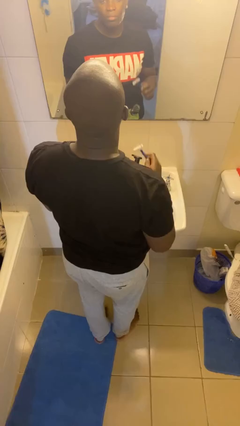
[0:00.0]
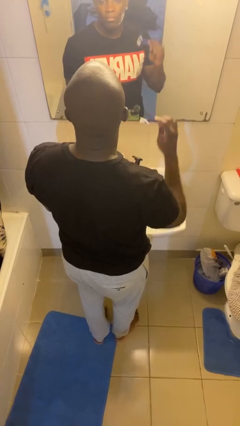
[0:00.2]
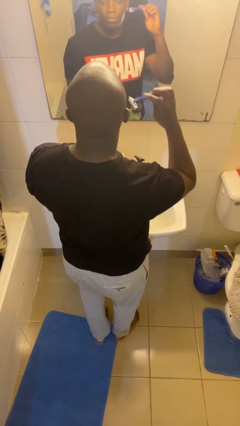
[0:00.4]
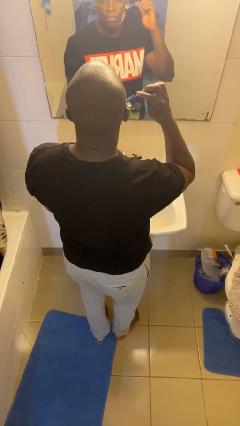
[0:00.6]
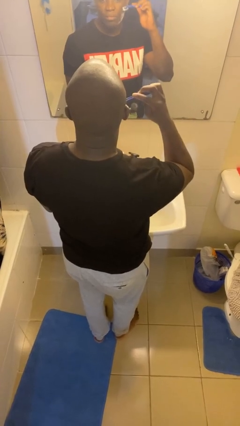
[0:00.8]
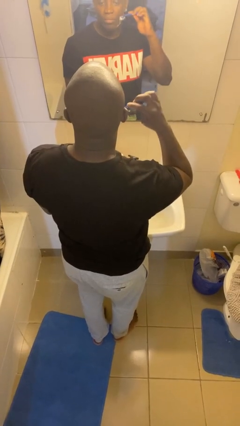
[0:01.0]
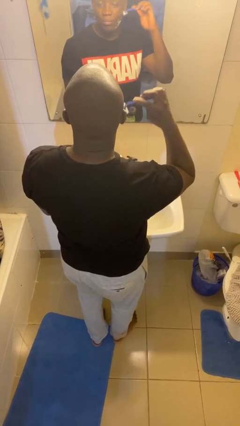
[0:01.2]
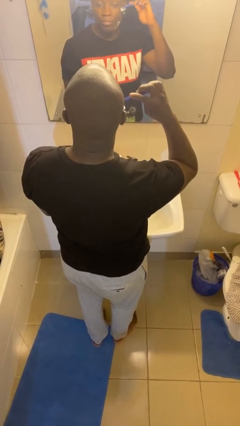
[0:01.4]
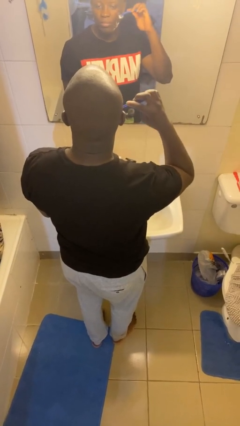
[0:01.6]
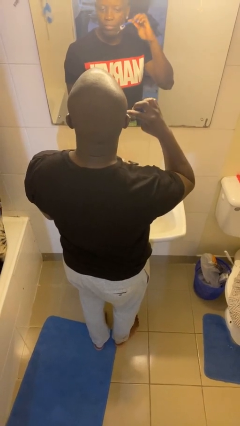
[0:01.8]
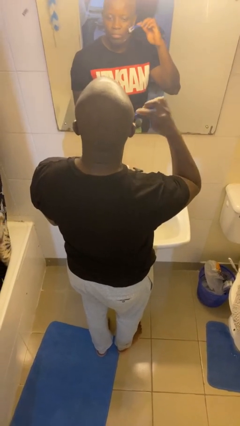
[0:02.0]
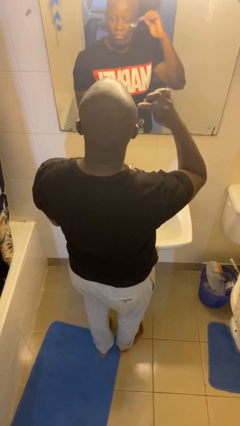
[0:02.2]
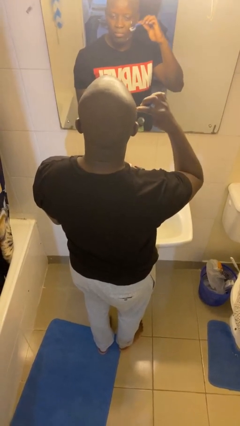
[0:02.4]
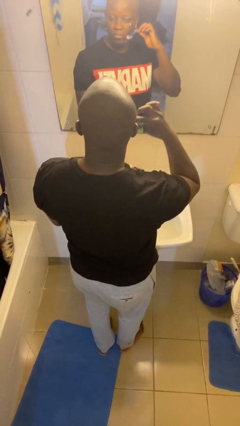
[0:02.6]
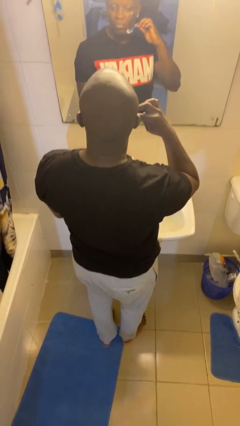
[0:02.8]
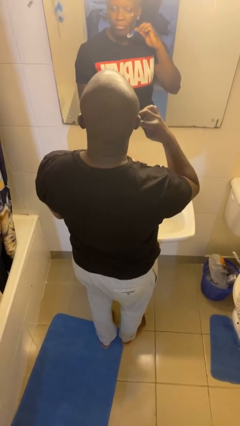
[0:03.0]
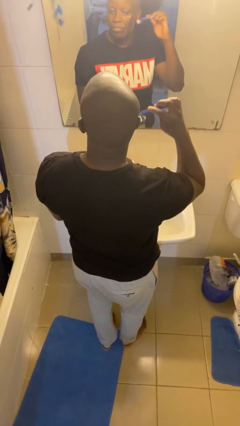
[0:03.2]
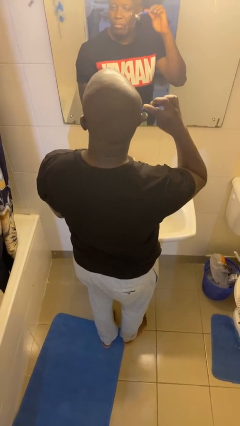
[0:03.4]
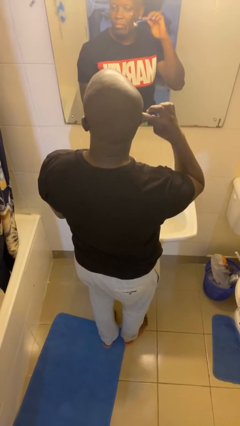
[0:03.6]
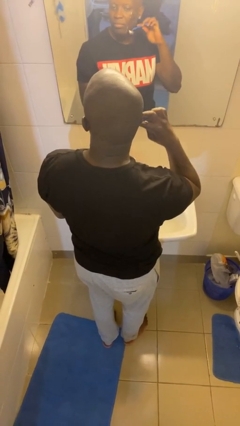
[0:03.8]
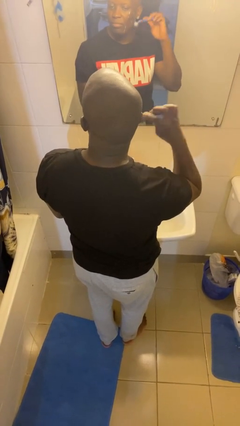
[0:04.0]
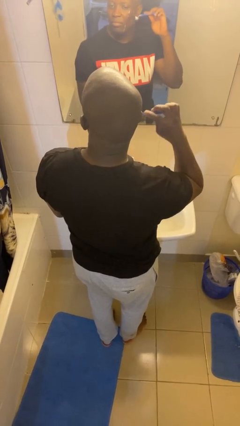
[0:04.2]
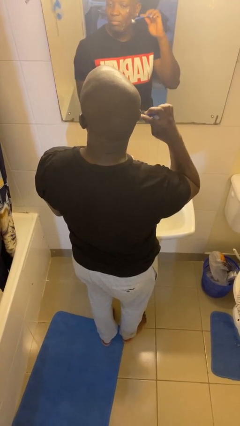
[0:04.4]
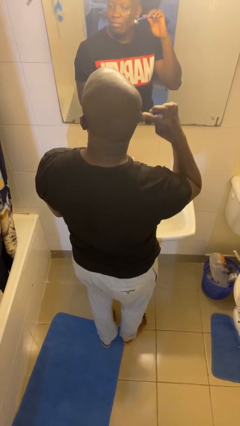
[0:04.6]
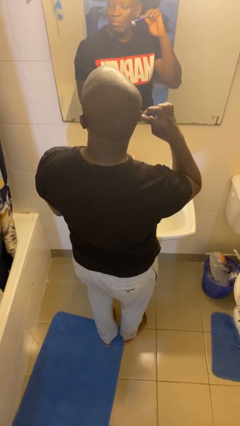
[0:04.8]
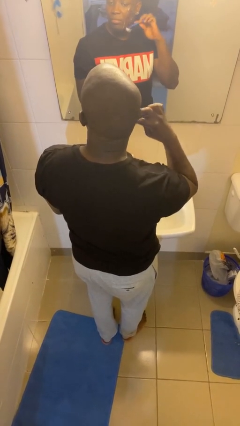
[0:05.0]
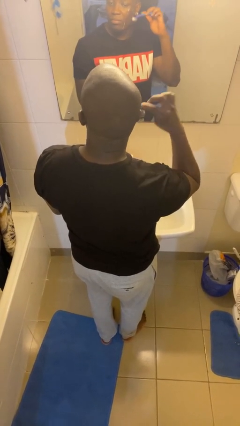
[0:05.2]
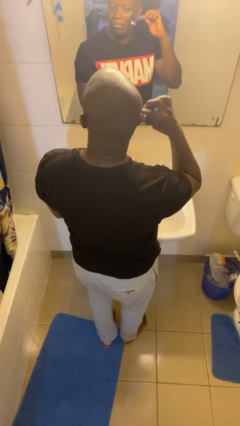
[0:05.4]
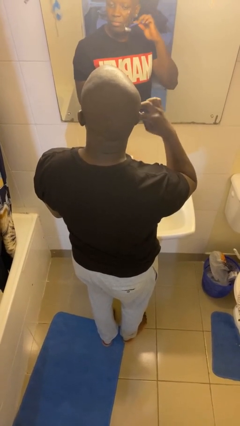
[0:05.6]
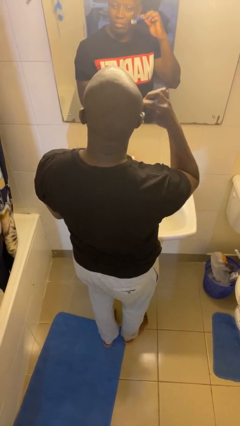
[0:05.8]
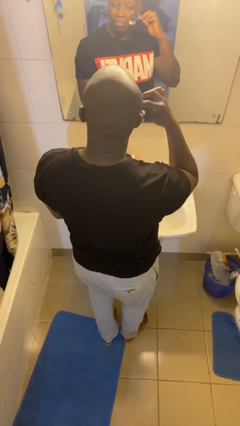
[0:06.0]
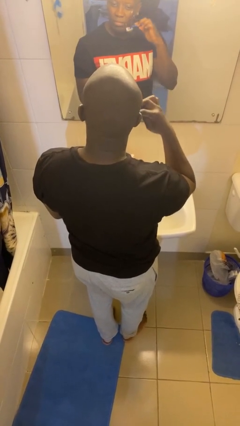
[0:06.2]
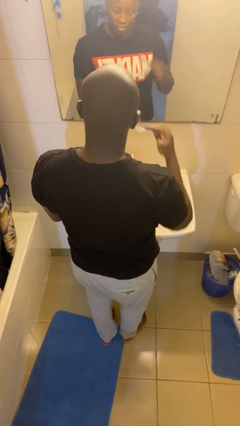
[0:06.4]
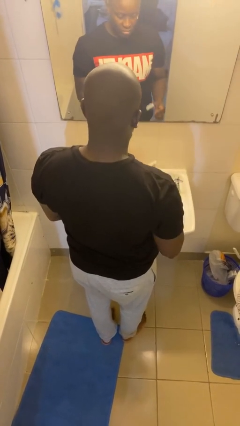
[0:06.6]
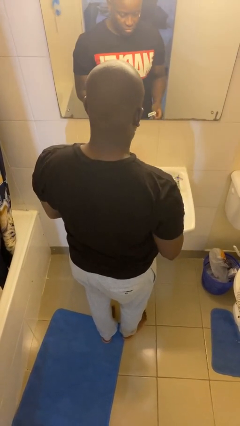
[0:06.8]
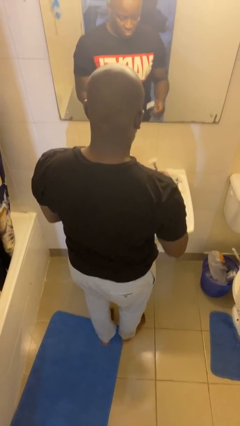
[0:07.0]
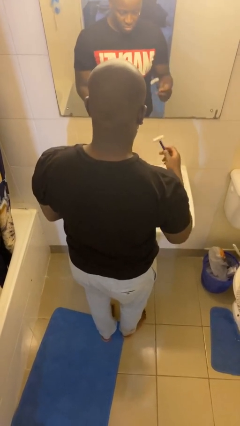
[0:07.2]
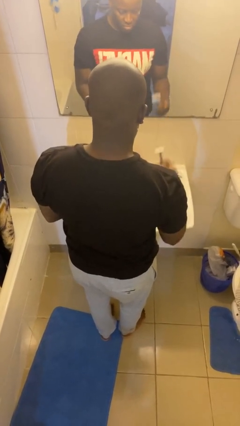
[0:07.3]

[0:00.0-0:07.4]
person shaves face

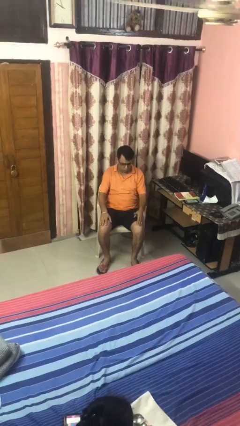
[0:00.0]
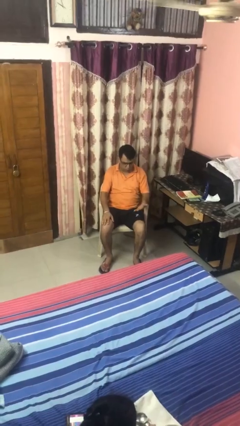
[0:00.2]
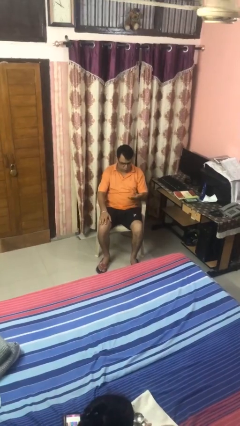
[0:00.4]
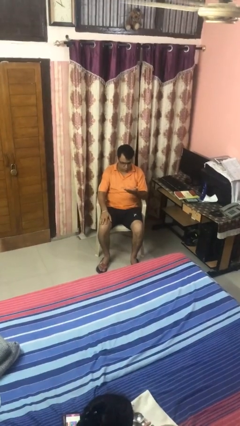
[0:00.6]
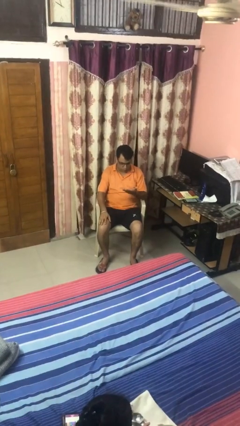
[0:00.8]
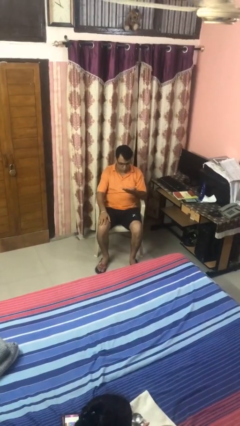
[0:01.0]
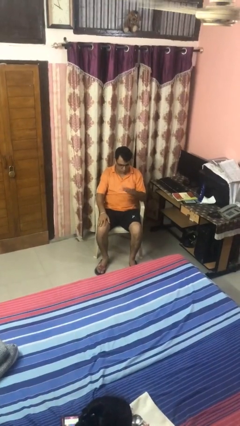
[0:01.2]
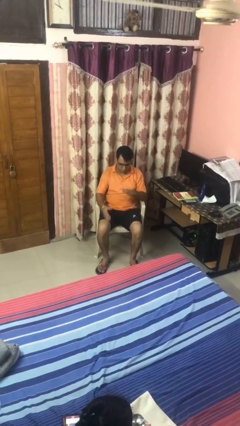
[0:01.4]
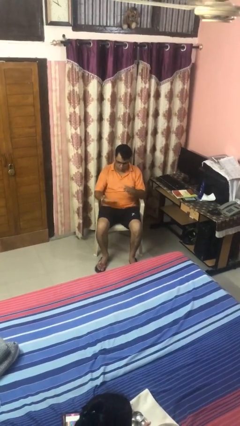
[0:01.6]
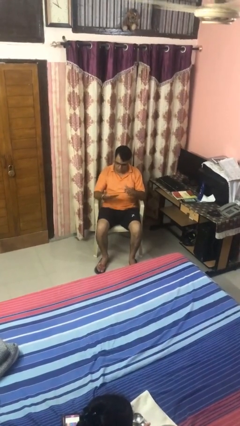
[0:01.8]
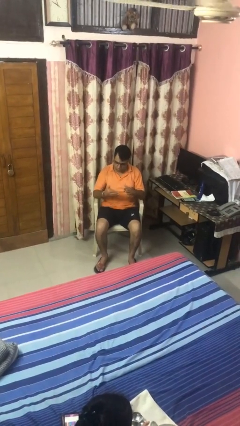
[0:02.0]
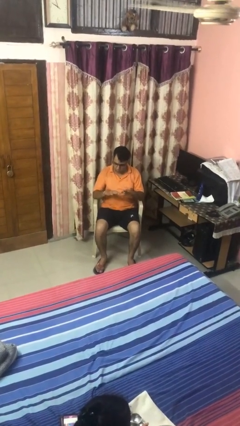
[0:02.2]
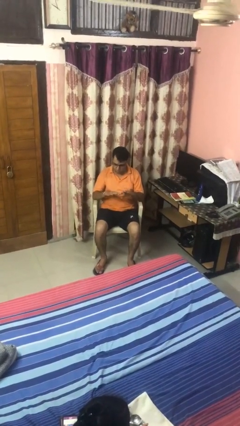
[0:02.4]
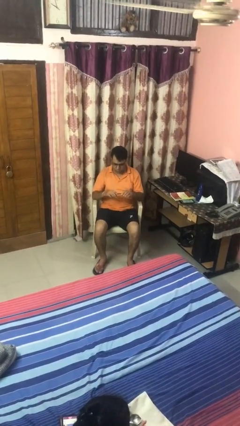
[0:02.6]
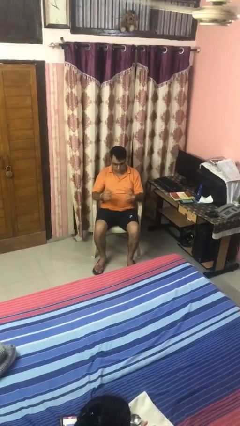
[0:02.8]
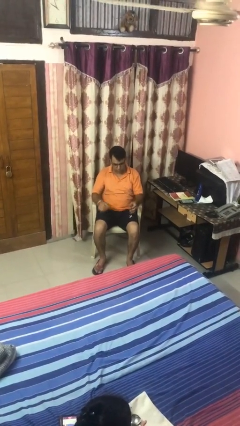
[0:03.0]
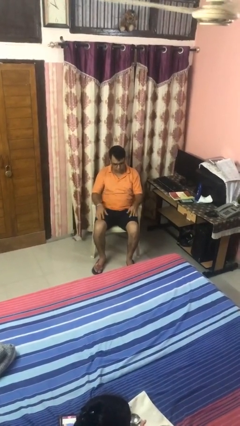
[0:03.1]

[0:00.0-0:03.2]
person looks at hands in lap

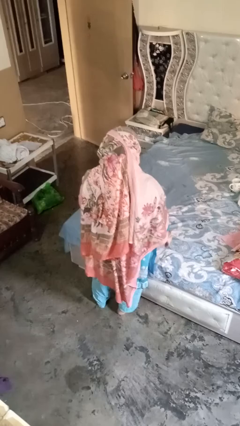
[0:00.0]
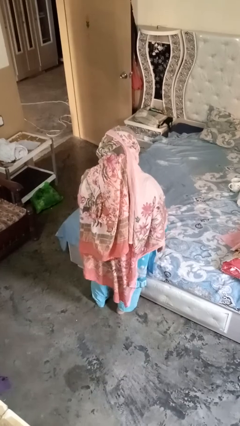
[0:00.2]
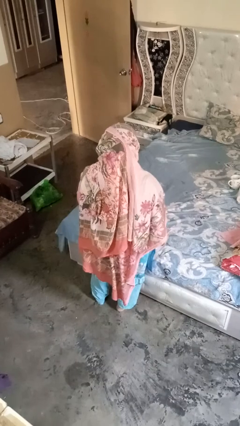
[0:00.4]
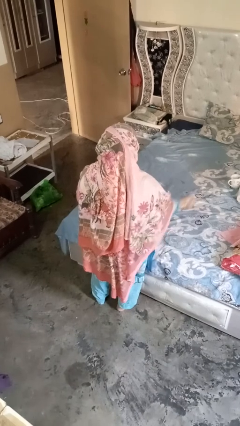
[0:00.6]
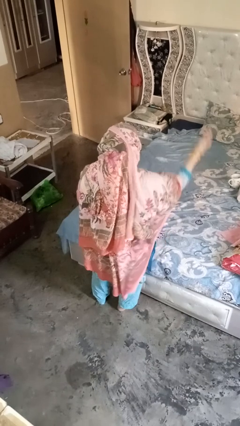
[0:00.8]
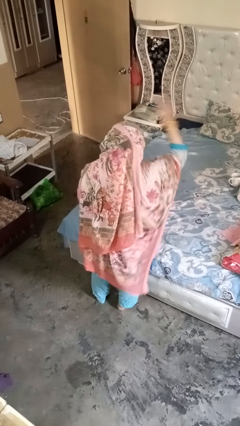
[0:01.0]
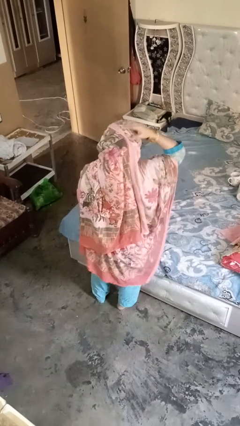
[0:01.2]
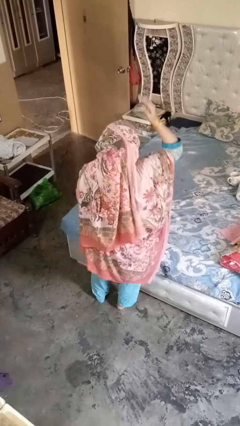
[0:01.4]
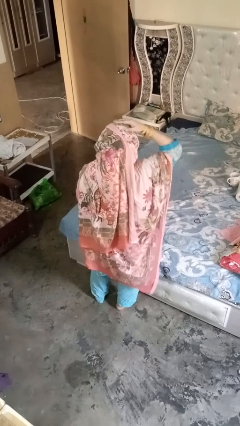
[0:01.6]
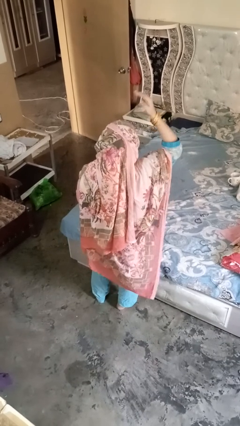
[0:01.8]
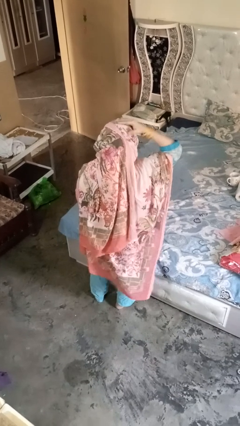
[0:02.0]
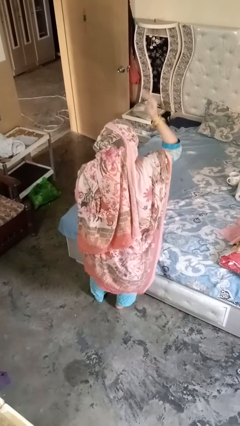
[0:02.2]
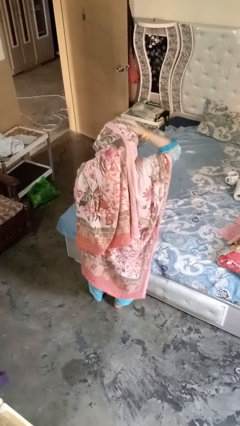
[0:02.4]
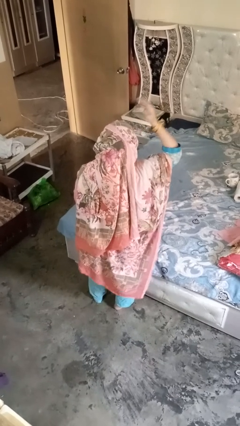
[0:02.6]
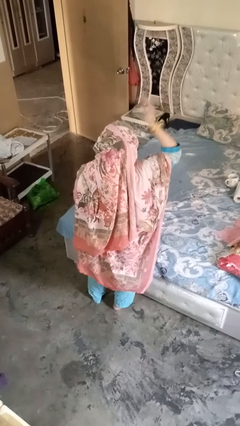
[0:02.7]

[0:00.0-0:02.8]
person pats head

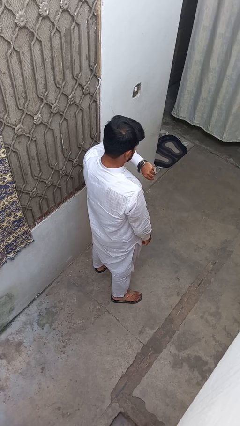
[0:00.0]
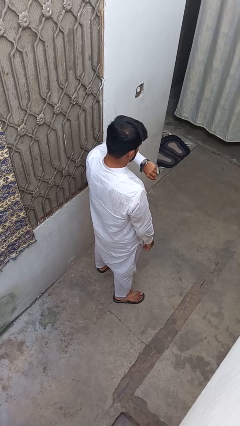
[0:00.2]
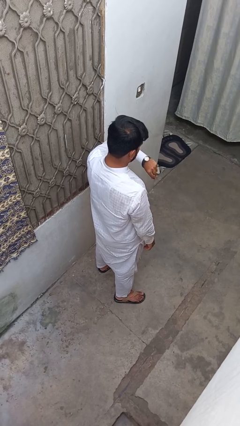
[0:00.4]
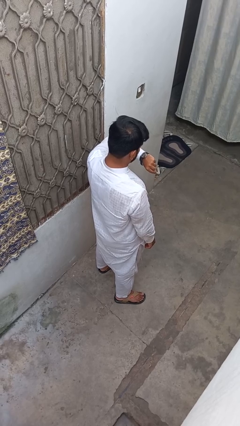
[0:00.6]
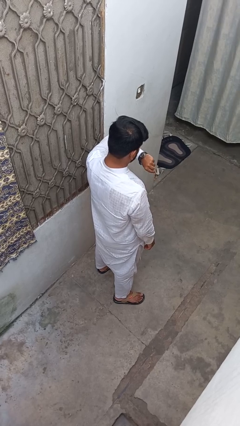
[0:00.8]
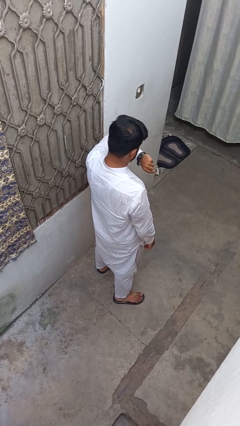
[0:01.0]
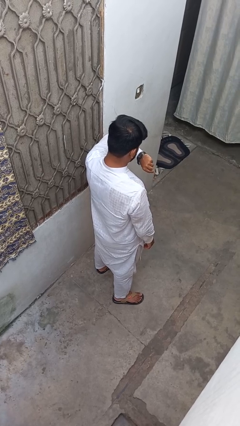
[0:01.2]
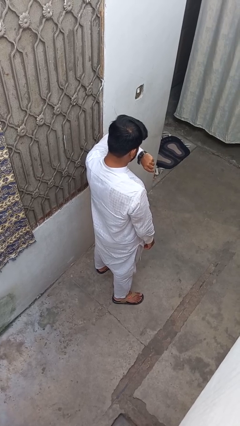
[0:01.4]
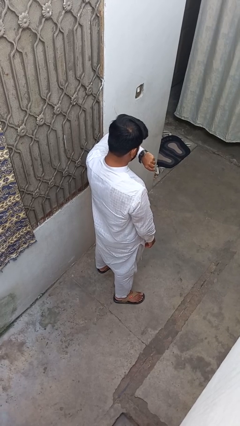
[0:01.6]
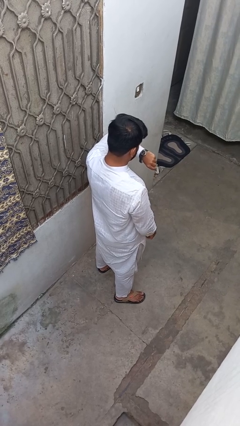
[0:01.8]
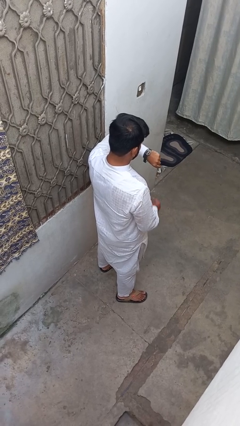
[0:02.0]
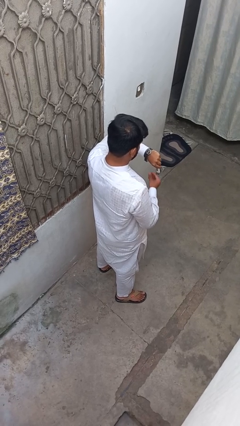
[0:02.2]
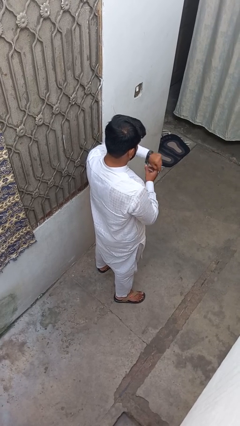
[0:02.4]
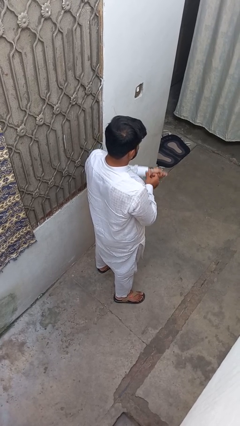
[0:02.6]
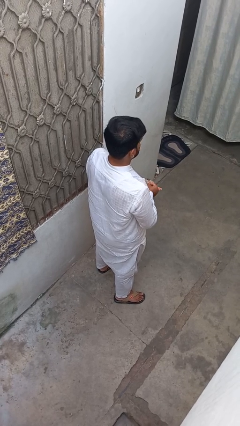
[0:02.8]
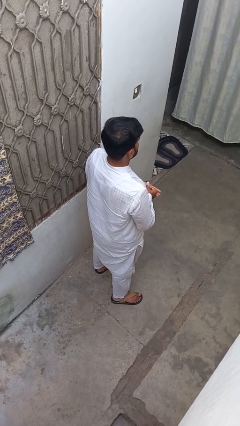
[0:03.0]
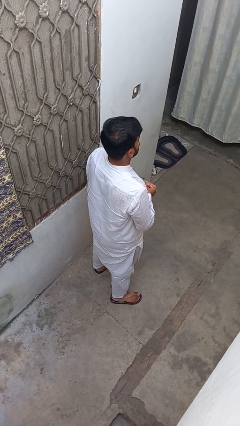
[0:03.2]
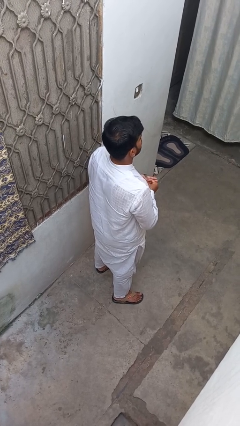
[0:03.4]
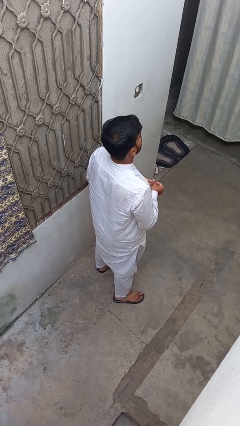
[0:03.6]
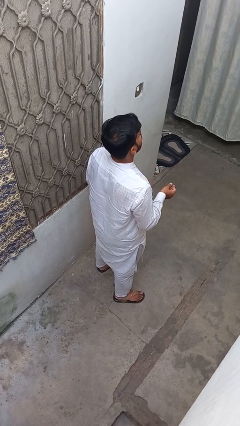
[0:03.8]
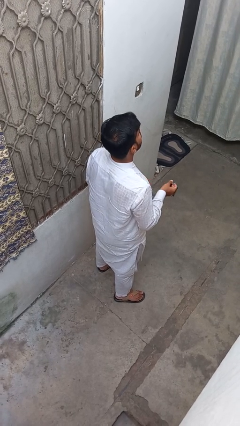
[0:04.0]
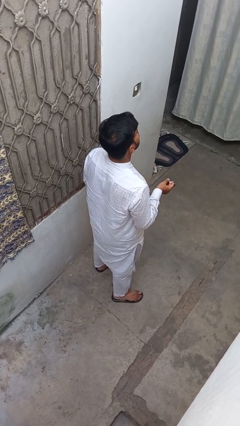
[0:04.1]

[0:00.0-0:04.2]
person takes off wristwatch
